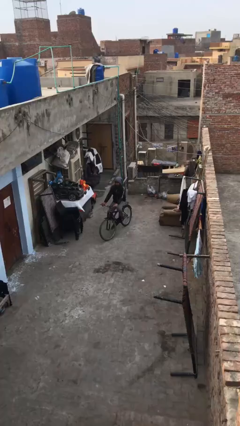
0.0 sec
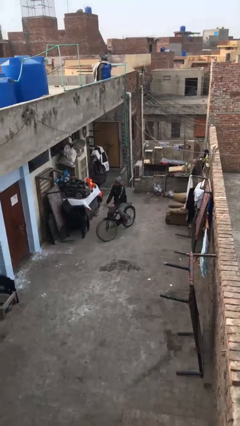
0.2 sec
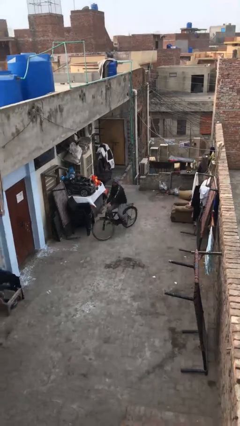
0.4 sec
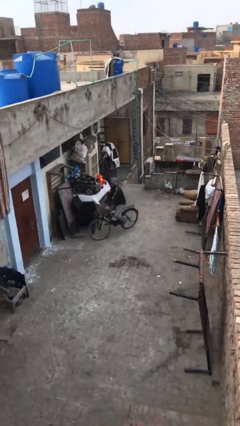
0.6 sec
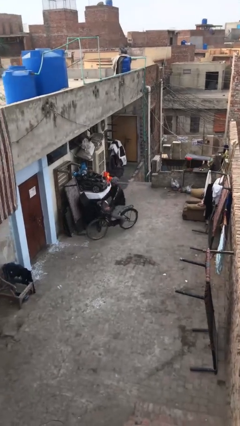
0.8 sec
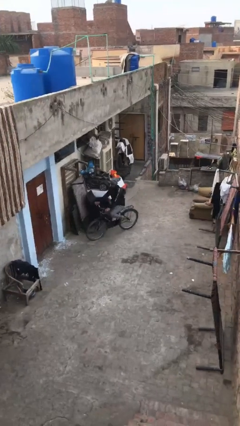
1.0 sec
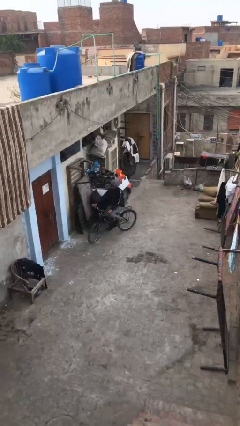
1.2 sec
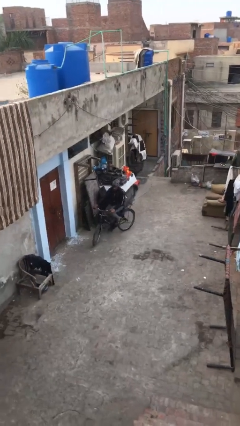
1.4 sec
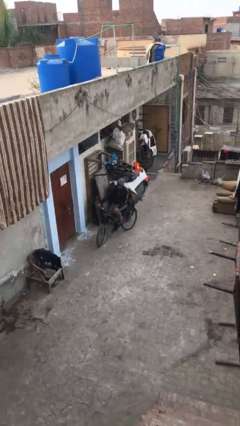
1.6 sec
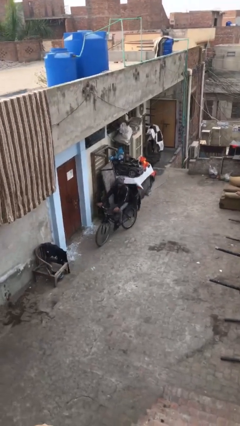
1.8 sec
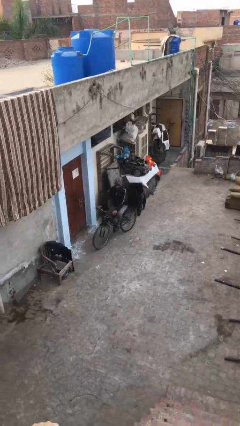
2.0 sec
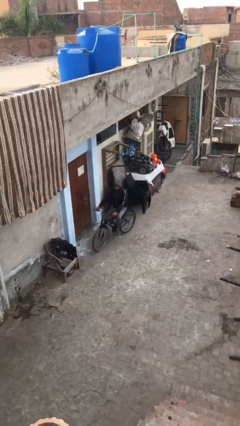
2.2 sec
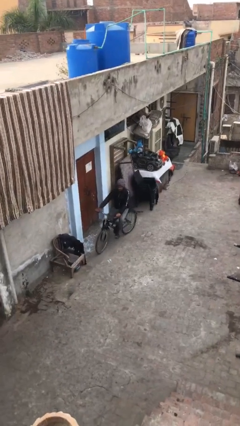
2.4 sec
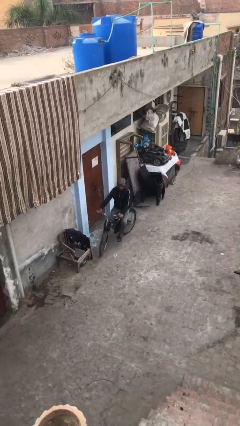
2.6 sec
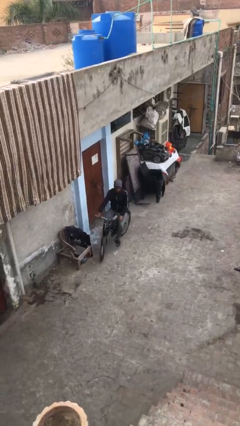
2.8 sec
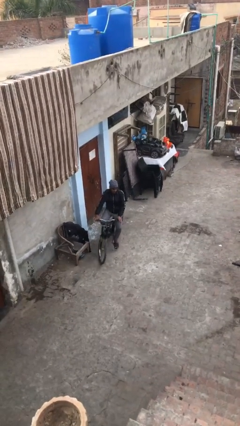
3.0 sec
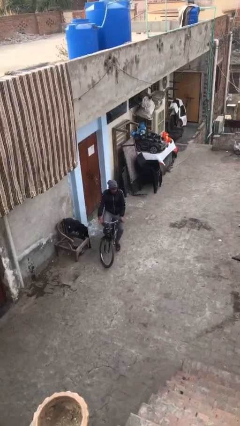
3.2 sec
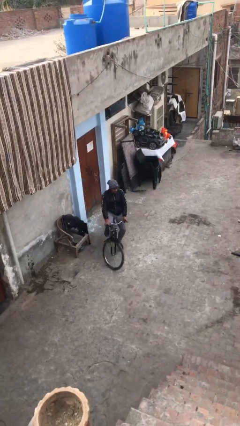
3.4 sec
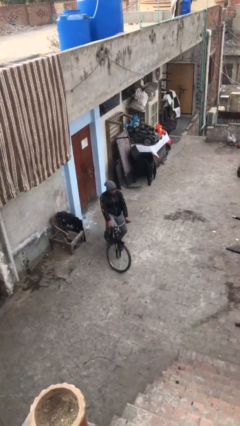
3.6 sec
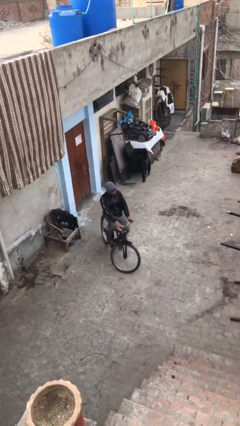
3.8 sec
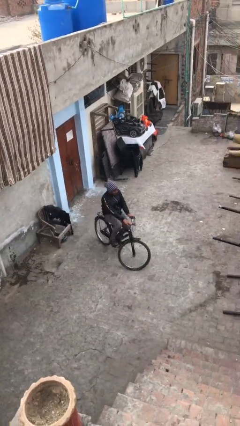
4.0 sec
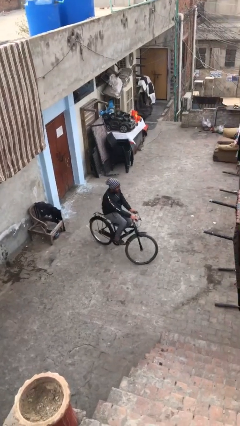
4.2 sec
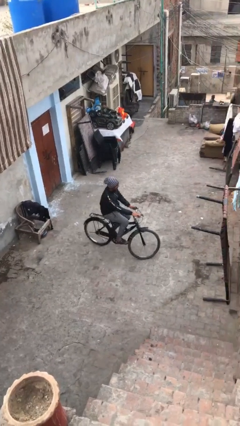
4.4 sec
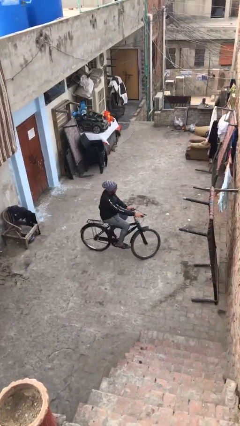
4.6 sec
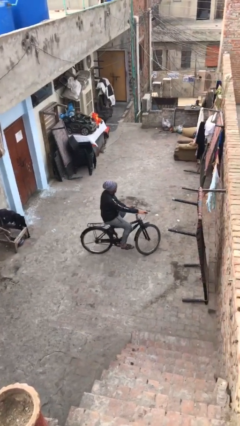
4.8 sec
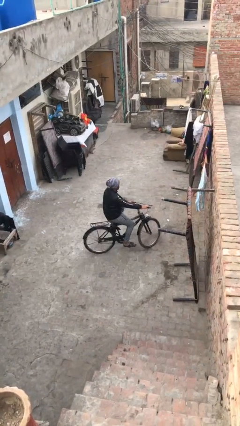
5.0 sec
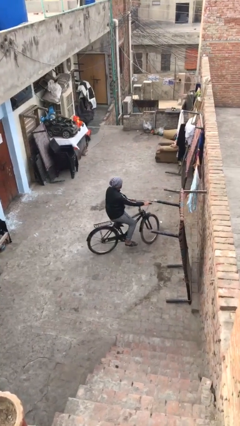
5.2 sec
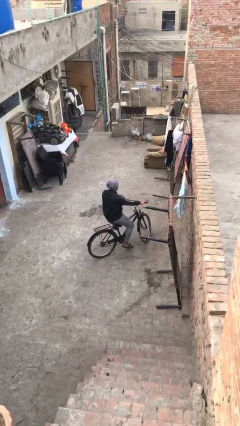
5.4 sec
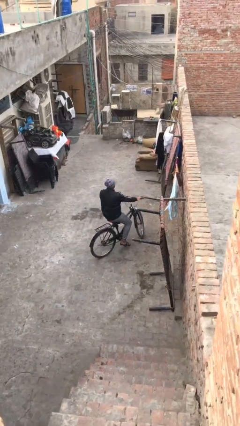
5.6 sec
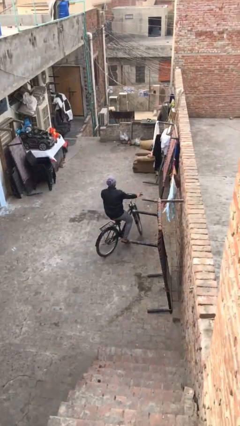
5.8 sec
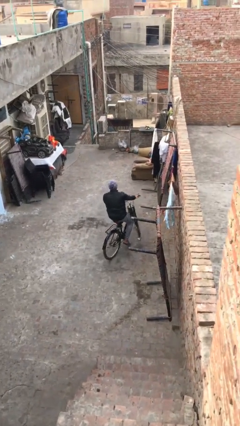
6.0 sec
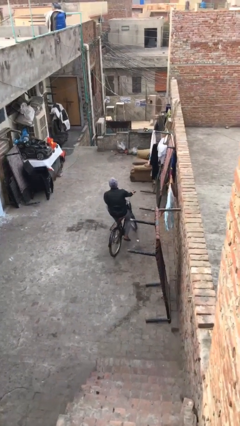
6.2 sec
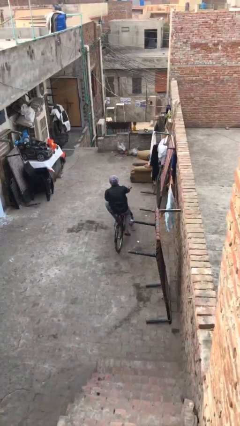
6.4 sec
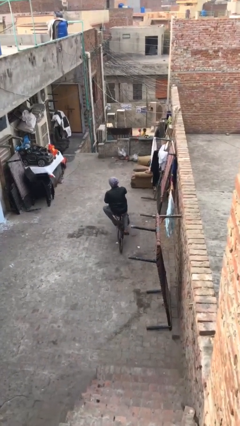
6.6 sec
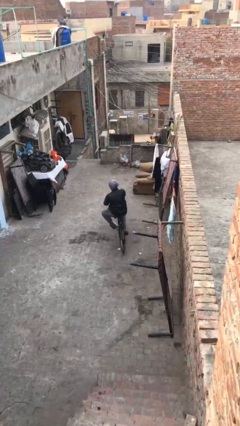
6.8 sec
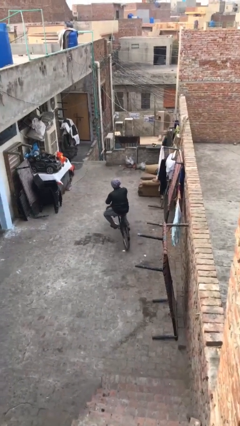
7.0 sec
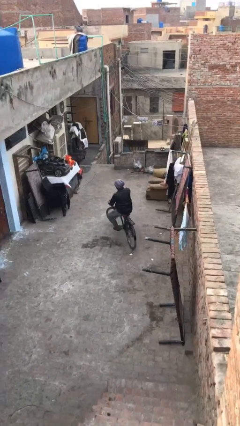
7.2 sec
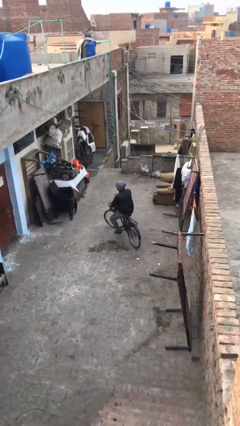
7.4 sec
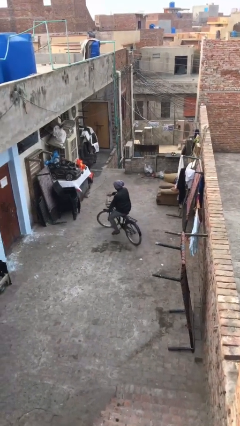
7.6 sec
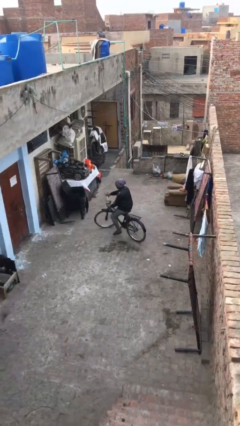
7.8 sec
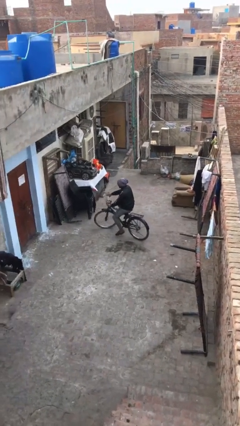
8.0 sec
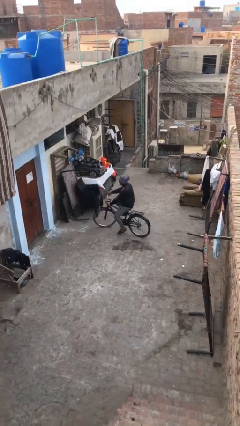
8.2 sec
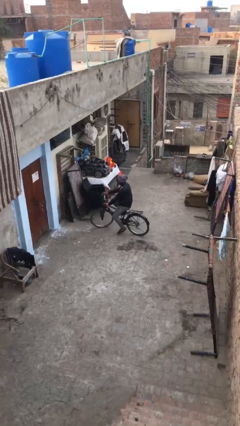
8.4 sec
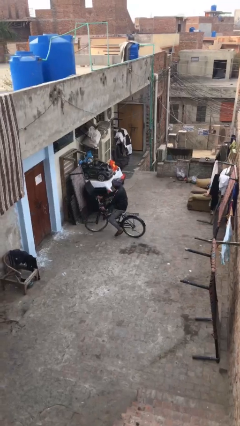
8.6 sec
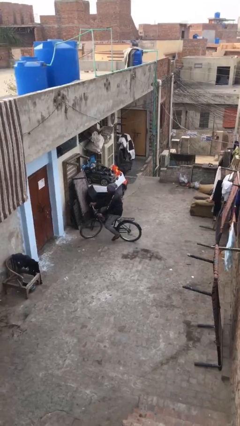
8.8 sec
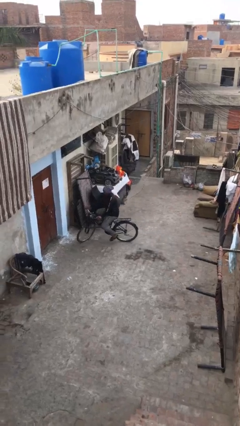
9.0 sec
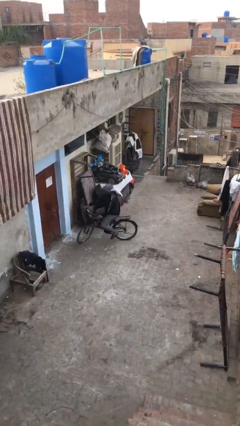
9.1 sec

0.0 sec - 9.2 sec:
person rides bicycle

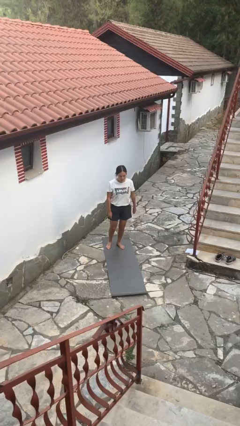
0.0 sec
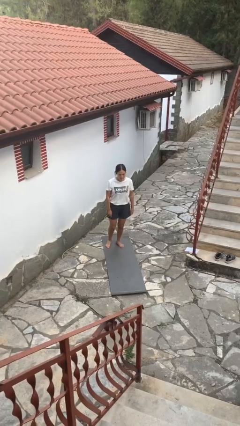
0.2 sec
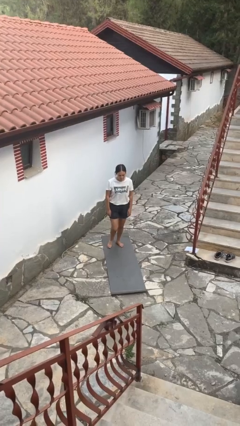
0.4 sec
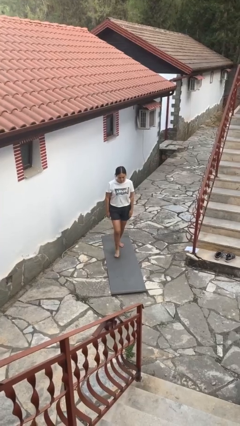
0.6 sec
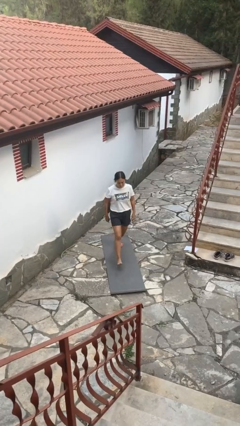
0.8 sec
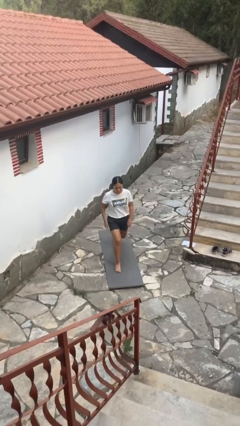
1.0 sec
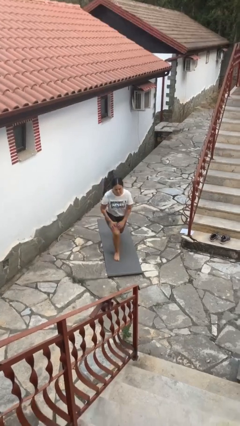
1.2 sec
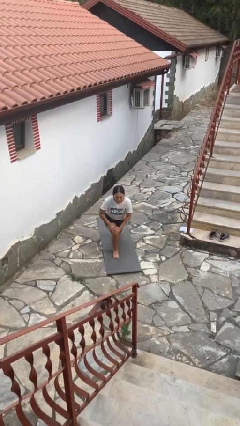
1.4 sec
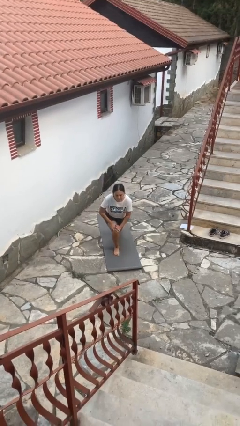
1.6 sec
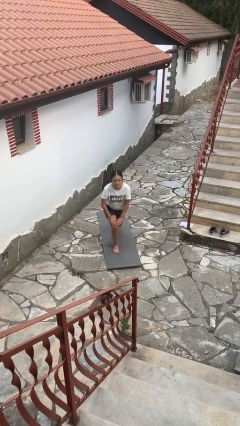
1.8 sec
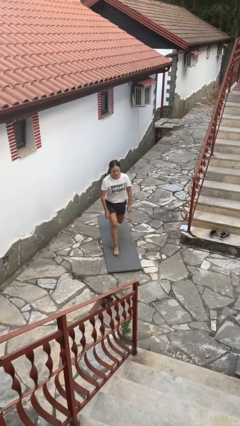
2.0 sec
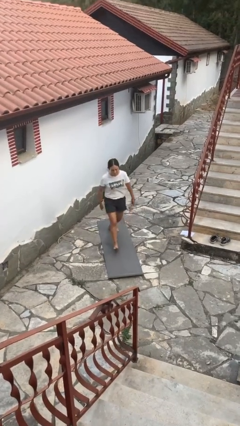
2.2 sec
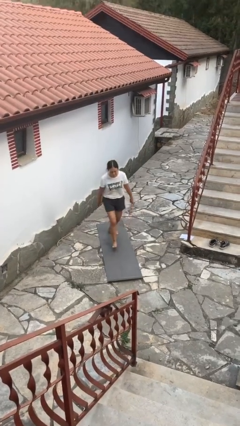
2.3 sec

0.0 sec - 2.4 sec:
person exercises with lunges

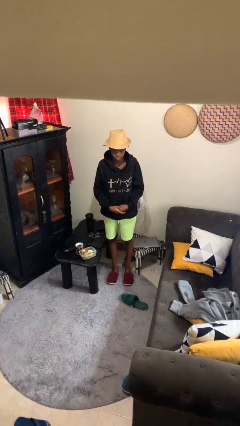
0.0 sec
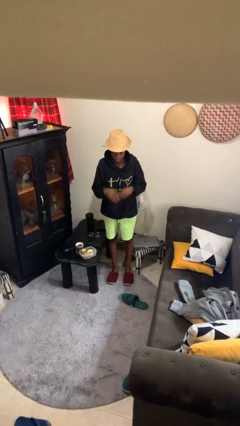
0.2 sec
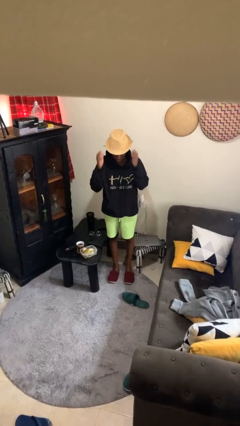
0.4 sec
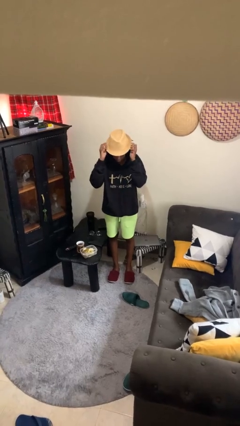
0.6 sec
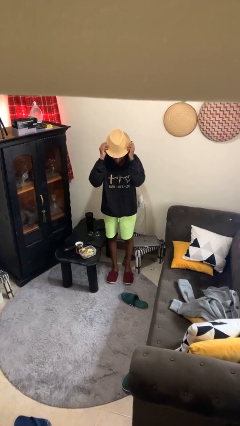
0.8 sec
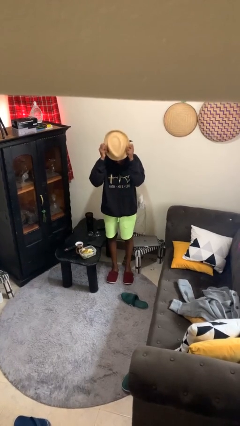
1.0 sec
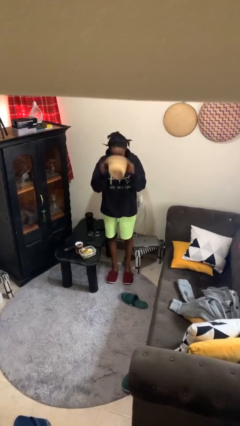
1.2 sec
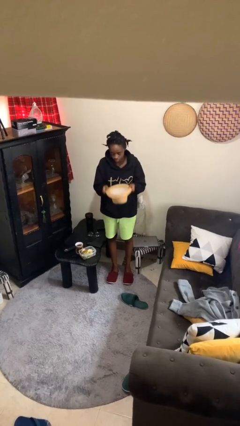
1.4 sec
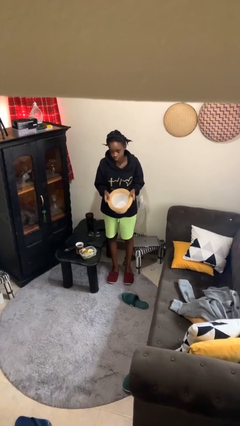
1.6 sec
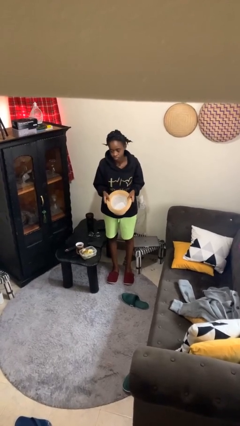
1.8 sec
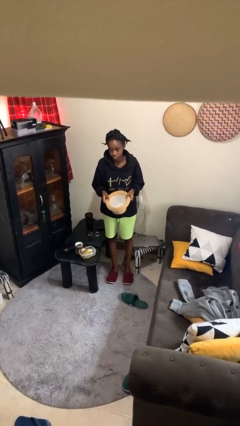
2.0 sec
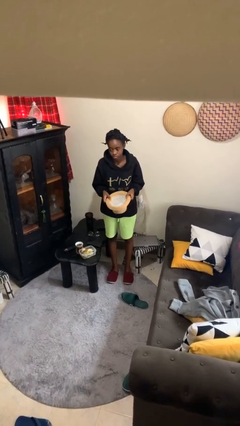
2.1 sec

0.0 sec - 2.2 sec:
person takes off hat

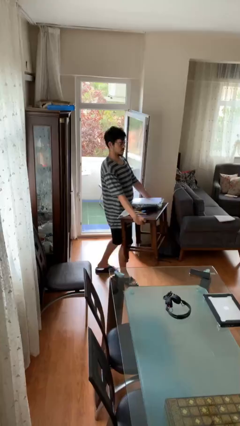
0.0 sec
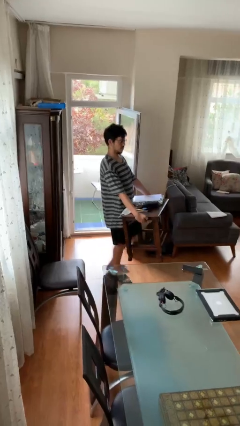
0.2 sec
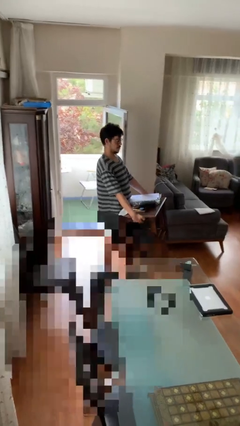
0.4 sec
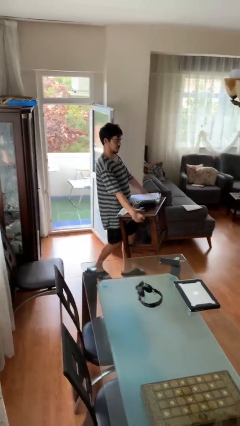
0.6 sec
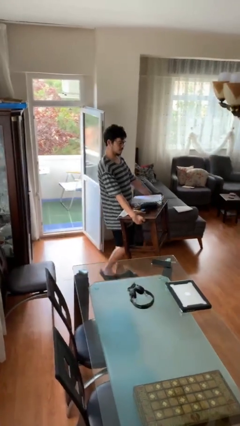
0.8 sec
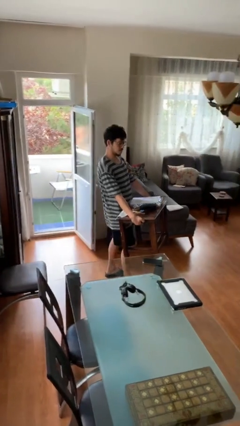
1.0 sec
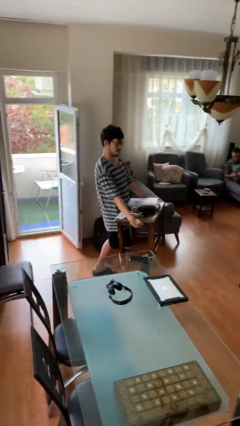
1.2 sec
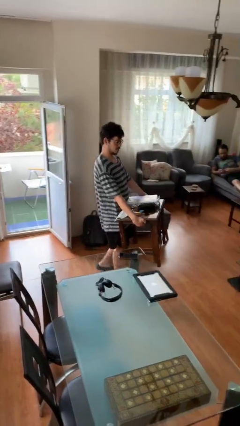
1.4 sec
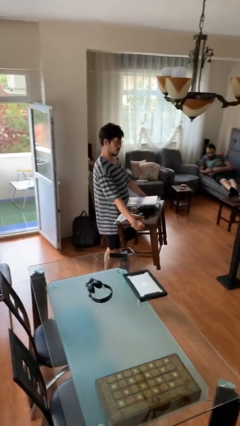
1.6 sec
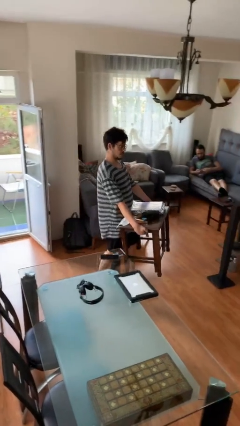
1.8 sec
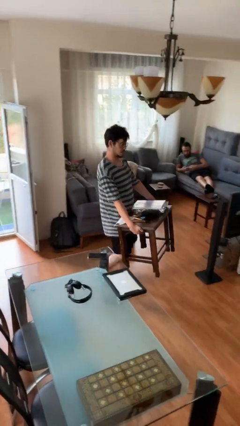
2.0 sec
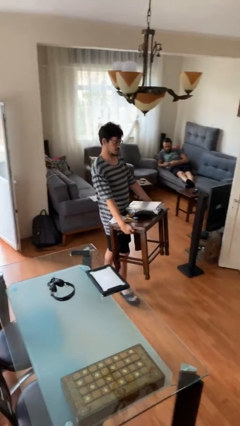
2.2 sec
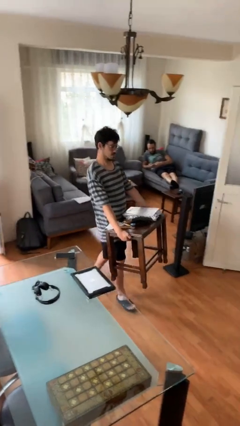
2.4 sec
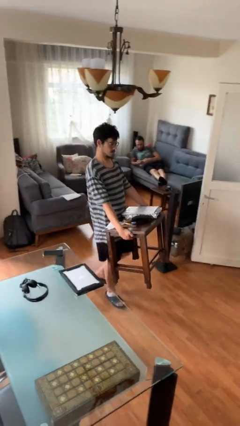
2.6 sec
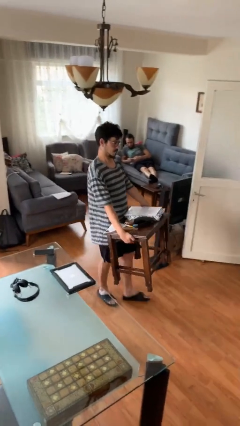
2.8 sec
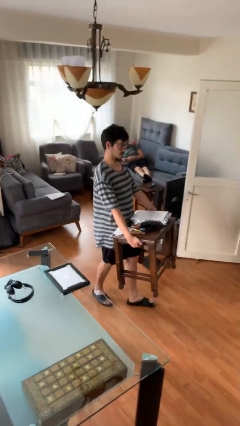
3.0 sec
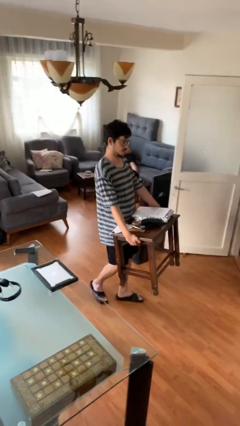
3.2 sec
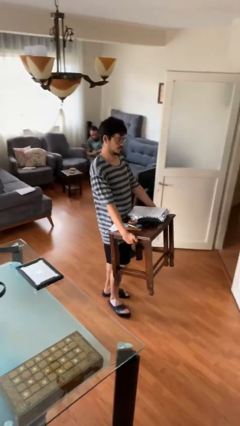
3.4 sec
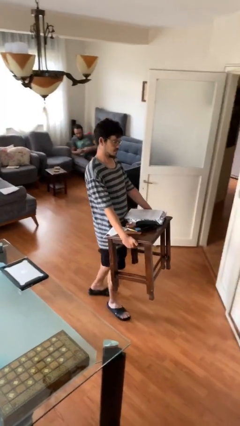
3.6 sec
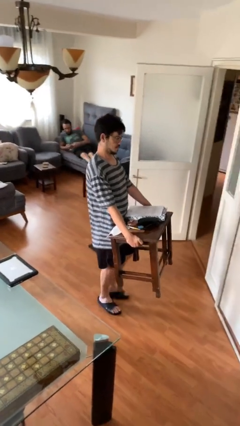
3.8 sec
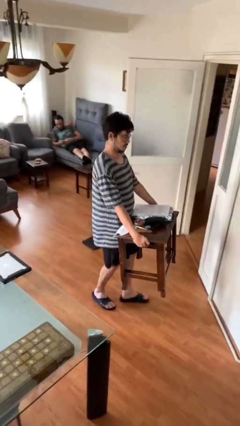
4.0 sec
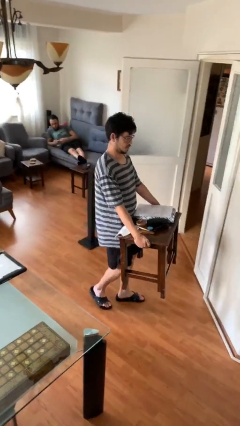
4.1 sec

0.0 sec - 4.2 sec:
person carries heavy object
